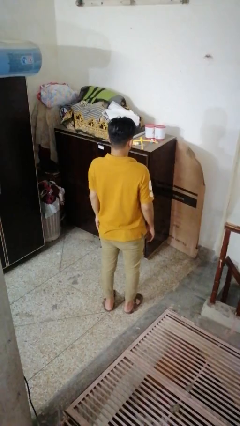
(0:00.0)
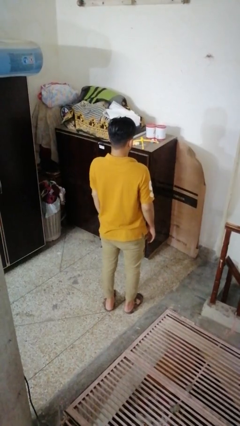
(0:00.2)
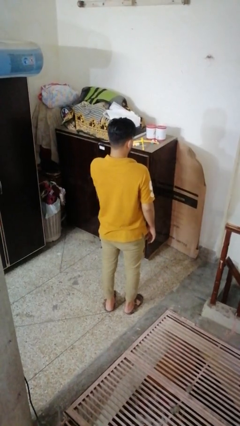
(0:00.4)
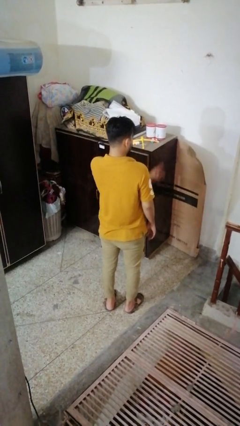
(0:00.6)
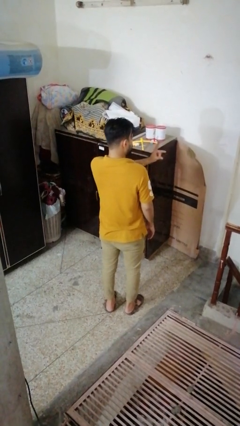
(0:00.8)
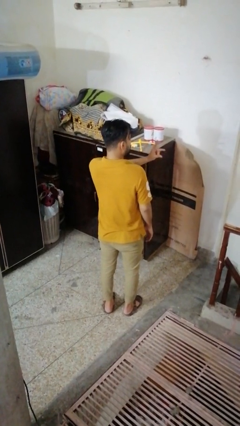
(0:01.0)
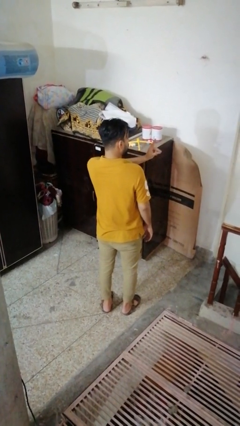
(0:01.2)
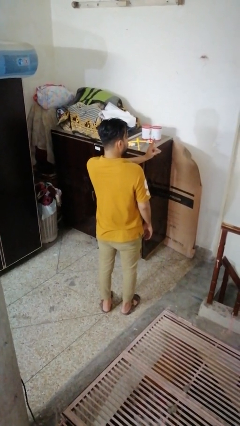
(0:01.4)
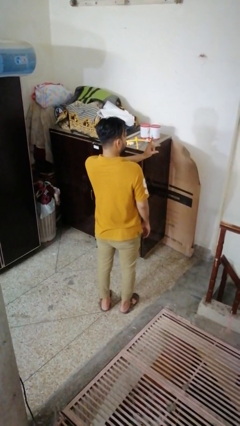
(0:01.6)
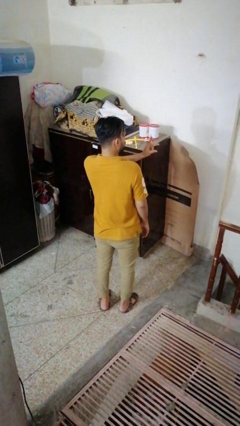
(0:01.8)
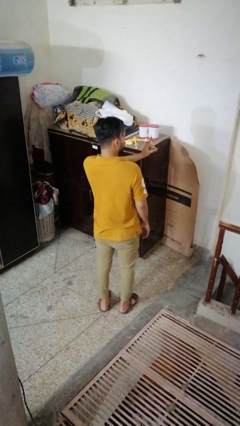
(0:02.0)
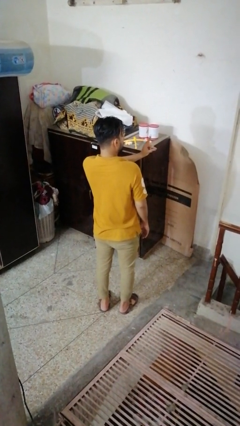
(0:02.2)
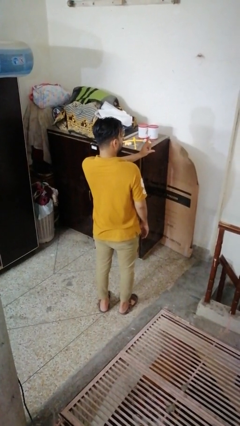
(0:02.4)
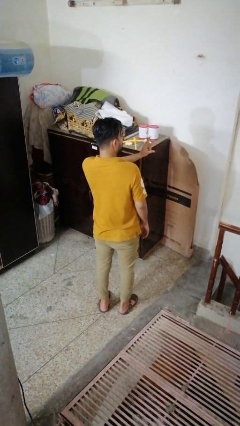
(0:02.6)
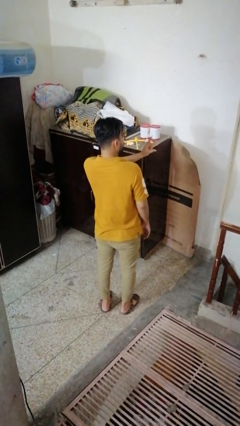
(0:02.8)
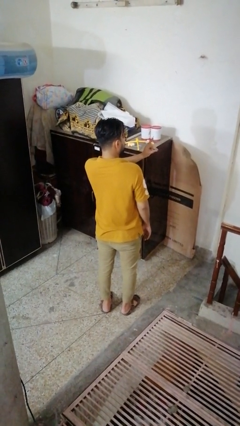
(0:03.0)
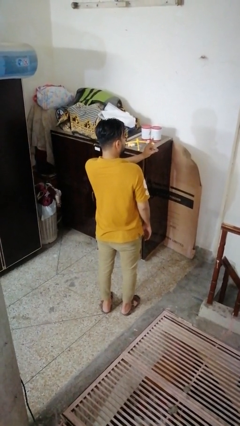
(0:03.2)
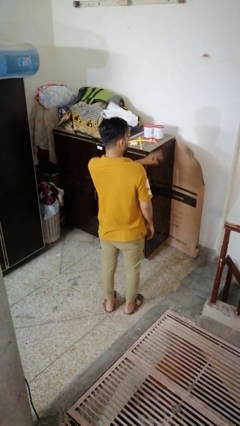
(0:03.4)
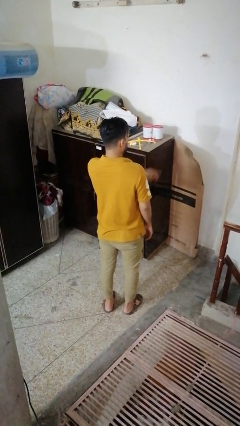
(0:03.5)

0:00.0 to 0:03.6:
person snaps fingers

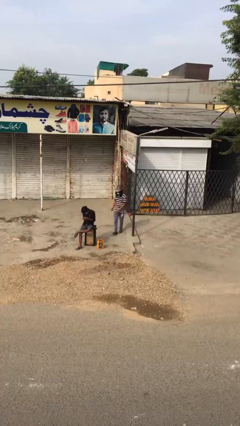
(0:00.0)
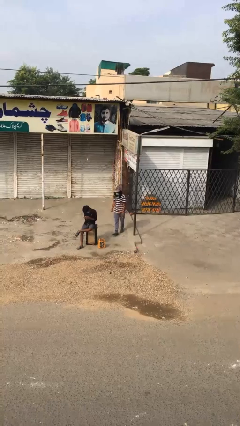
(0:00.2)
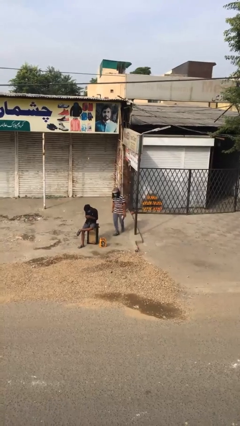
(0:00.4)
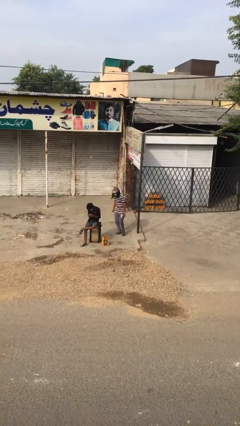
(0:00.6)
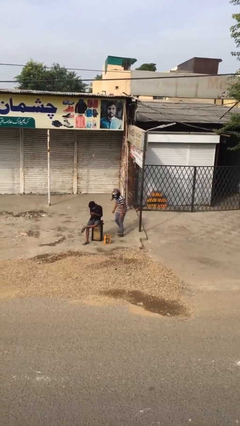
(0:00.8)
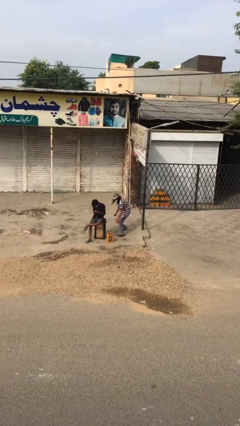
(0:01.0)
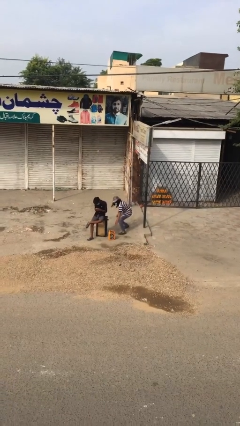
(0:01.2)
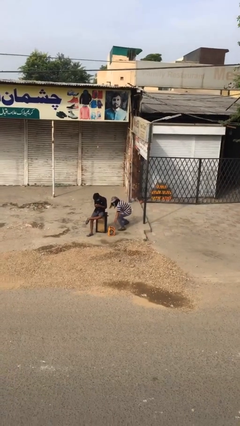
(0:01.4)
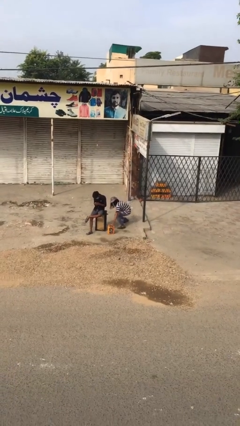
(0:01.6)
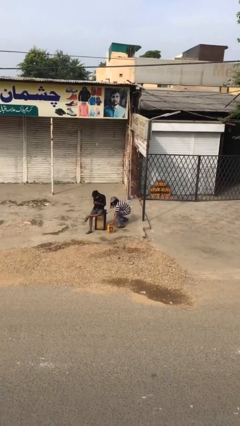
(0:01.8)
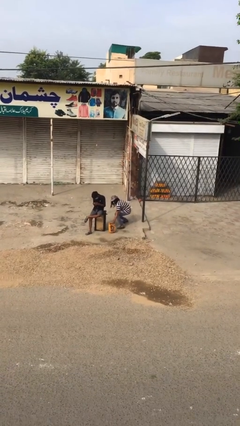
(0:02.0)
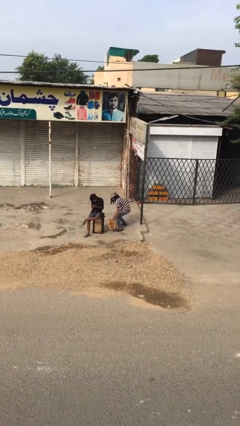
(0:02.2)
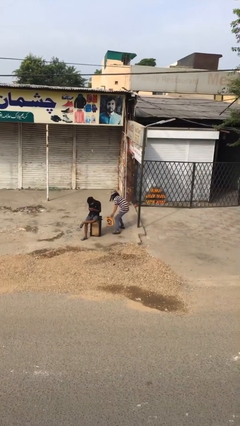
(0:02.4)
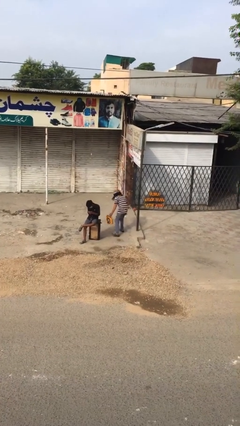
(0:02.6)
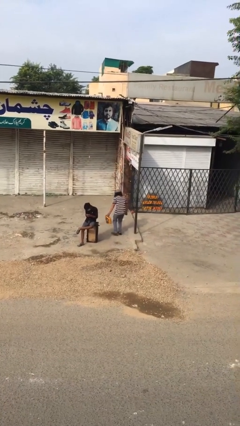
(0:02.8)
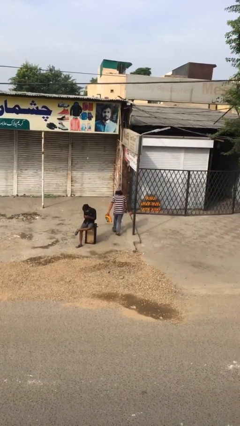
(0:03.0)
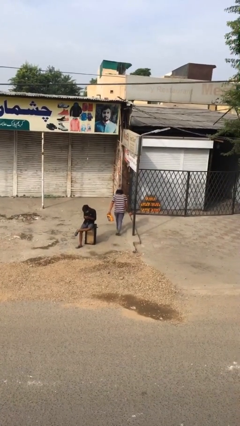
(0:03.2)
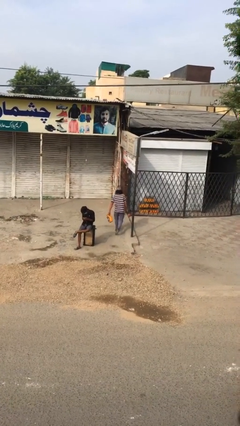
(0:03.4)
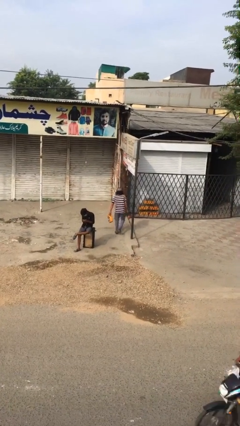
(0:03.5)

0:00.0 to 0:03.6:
person steals object from person

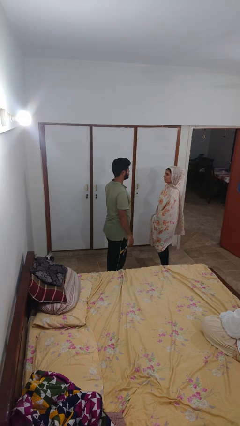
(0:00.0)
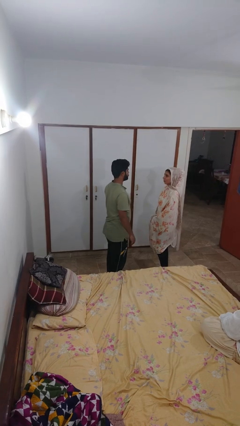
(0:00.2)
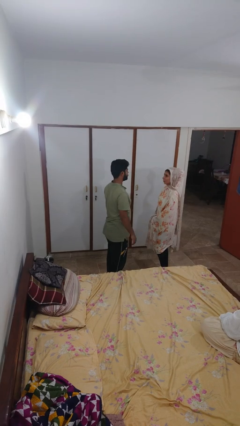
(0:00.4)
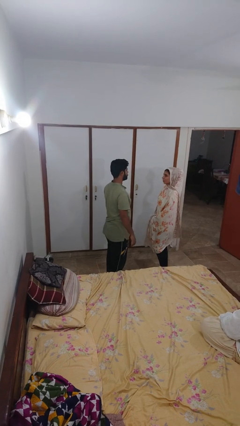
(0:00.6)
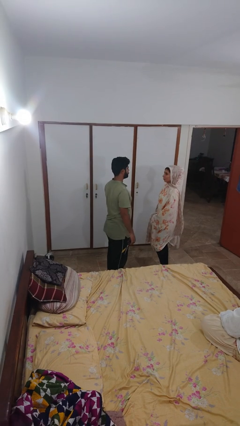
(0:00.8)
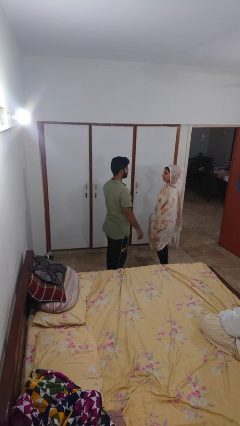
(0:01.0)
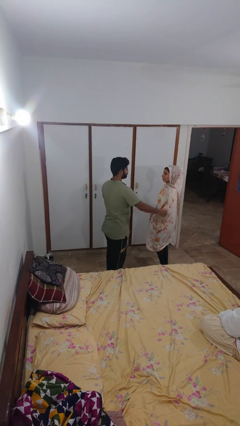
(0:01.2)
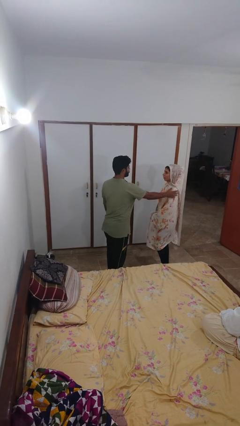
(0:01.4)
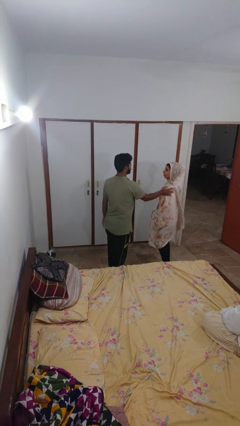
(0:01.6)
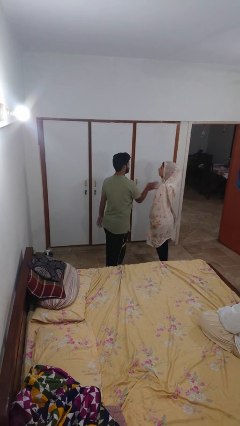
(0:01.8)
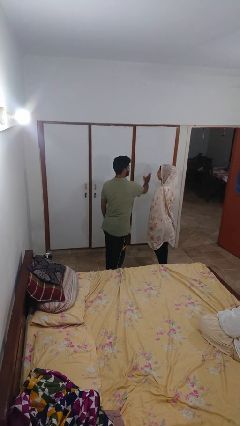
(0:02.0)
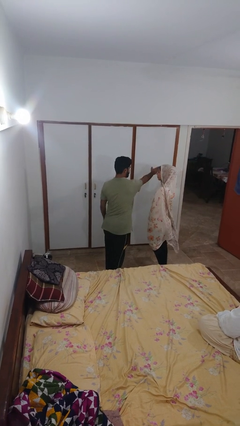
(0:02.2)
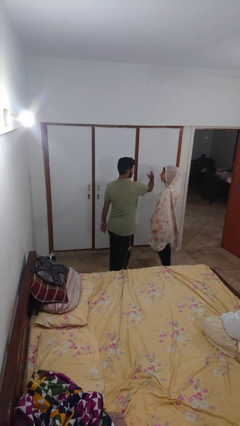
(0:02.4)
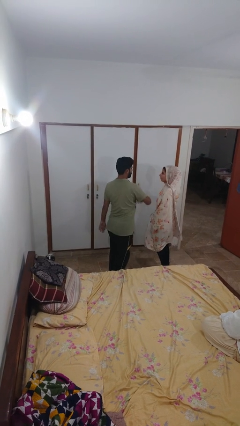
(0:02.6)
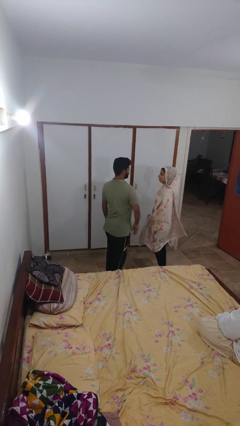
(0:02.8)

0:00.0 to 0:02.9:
person shoves person

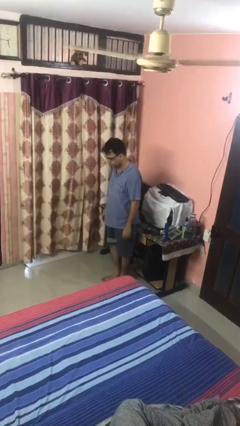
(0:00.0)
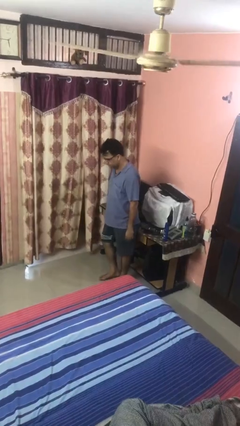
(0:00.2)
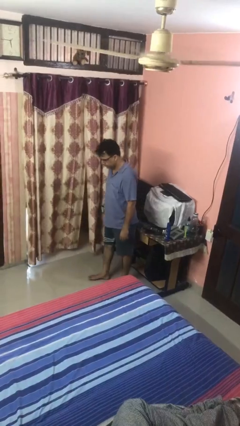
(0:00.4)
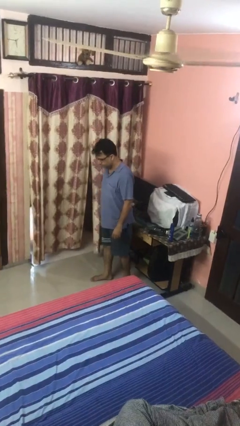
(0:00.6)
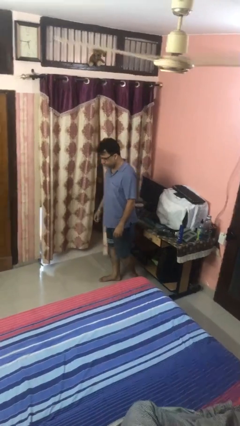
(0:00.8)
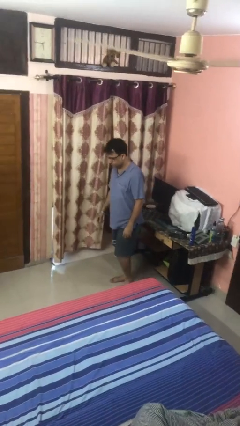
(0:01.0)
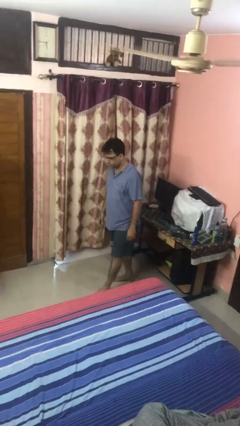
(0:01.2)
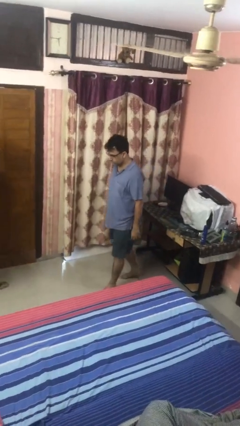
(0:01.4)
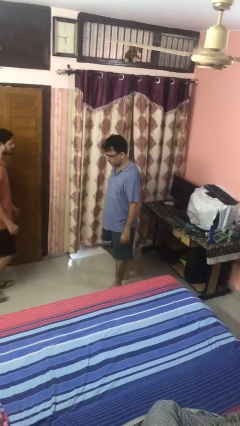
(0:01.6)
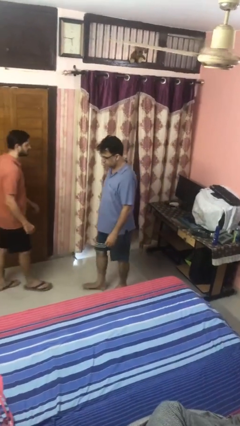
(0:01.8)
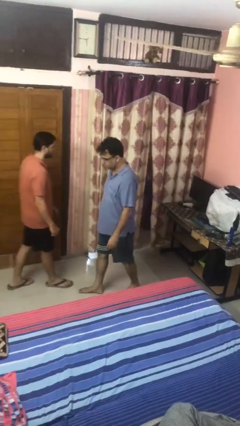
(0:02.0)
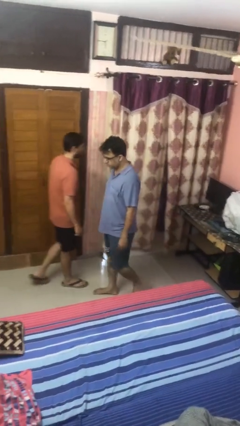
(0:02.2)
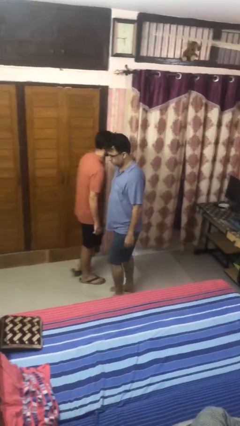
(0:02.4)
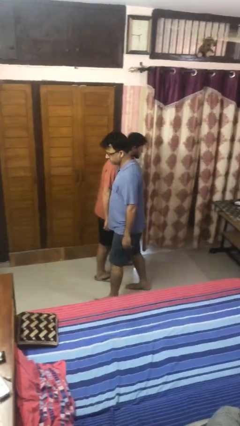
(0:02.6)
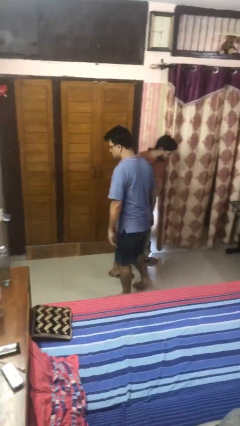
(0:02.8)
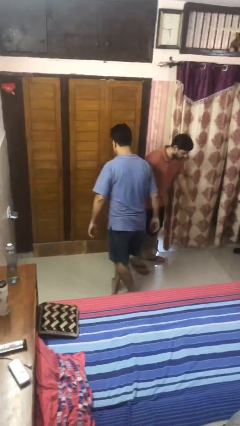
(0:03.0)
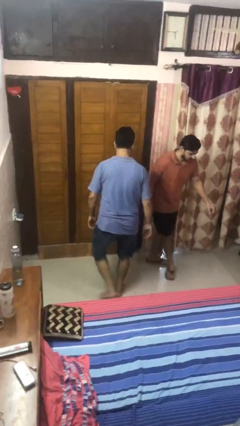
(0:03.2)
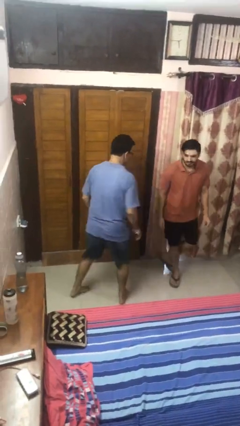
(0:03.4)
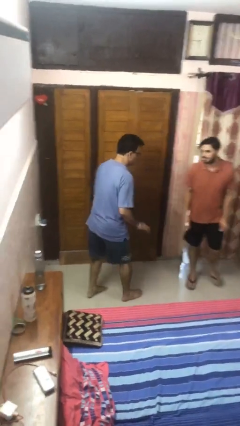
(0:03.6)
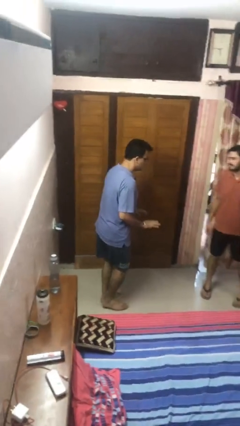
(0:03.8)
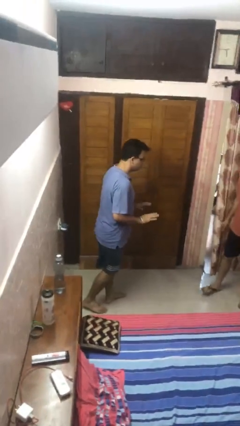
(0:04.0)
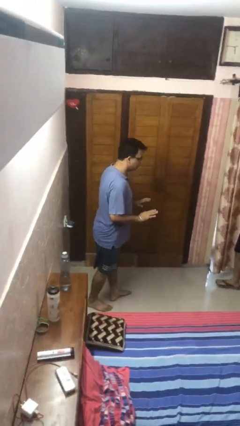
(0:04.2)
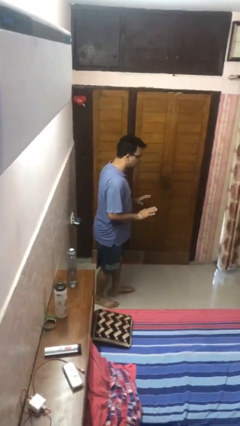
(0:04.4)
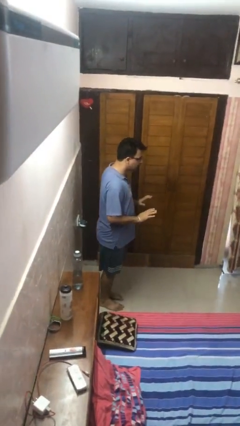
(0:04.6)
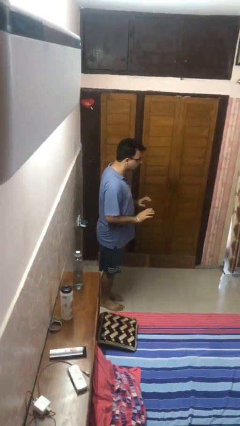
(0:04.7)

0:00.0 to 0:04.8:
person bumps into person

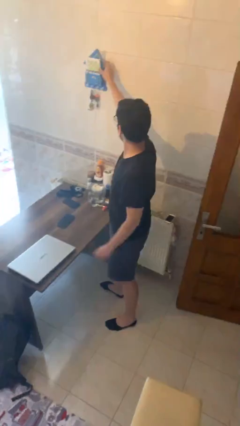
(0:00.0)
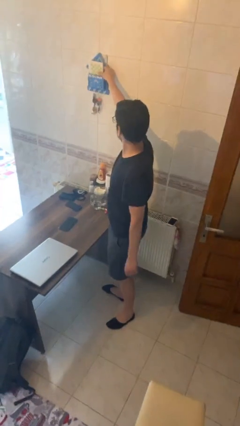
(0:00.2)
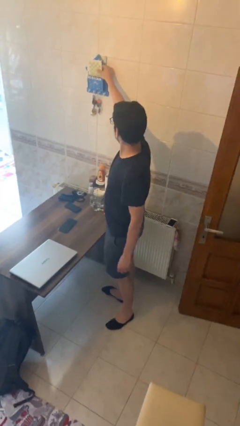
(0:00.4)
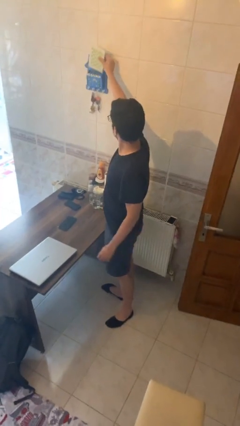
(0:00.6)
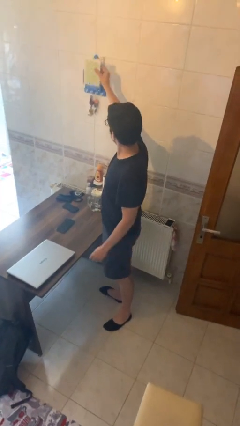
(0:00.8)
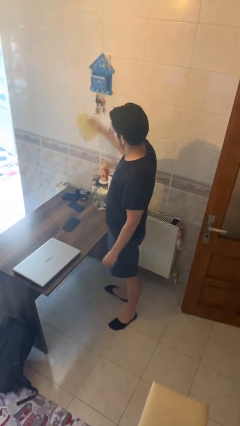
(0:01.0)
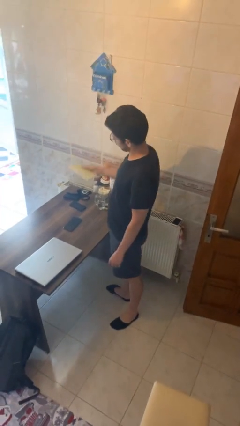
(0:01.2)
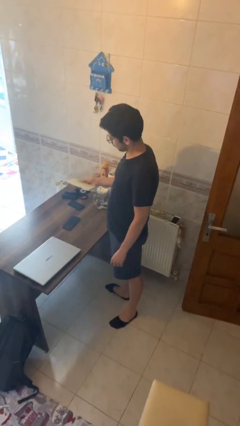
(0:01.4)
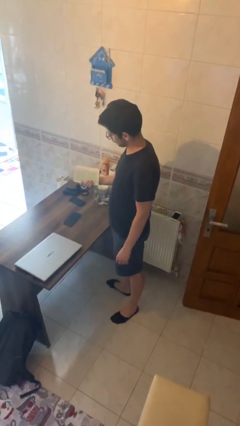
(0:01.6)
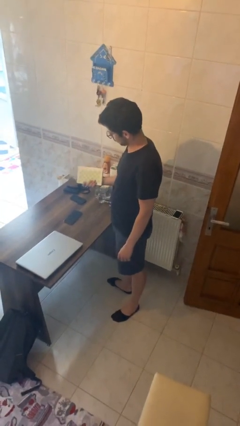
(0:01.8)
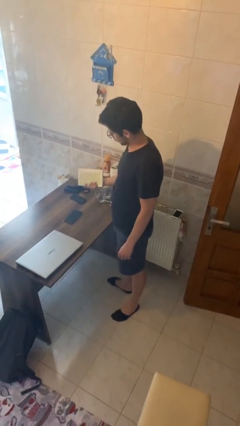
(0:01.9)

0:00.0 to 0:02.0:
person picks up object from shelf

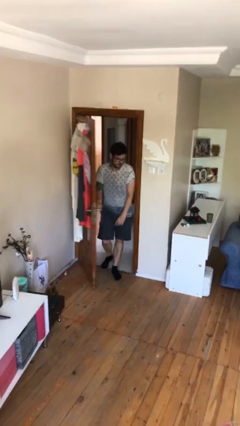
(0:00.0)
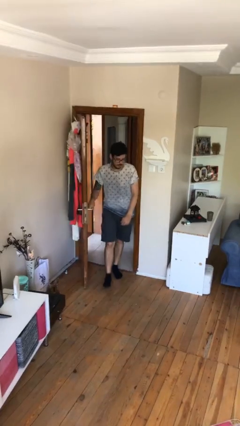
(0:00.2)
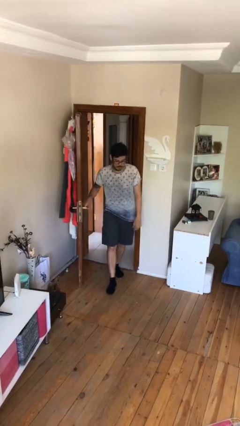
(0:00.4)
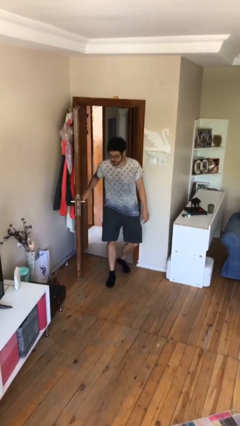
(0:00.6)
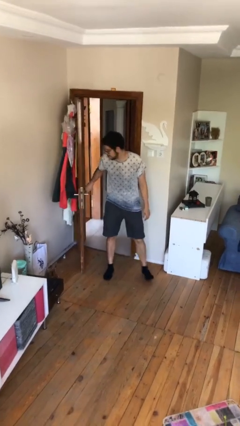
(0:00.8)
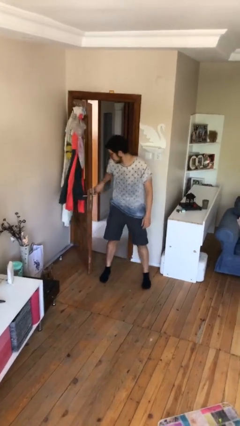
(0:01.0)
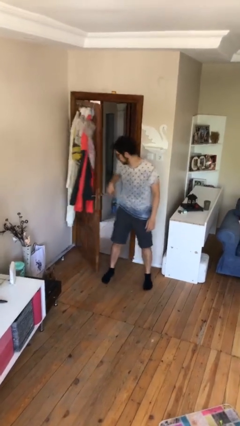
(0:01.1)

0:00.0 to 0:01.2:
person enters scene through structure
